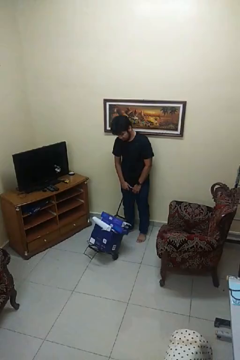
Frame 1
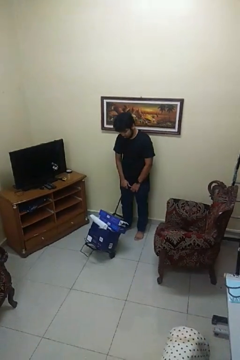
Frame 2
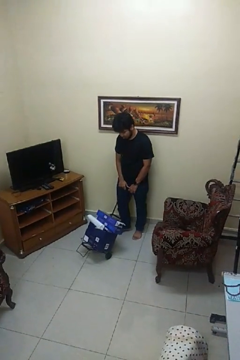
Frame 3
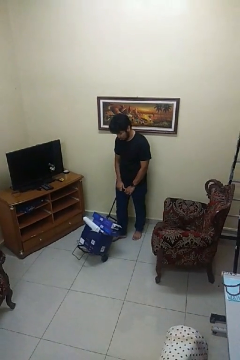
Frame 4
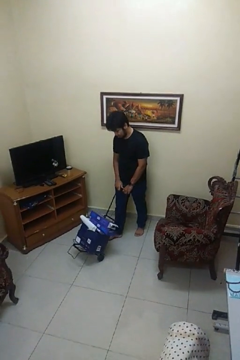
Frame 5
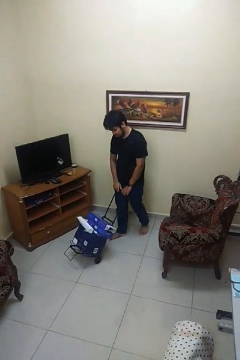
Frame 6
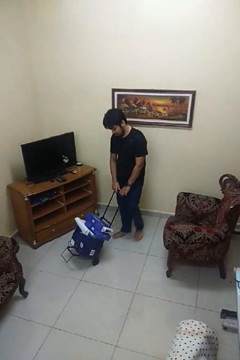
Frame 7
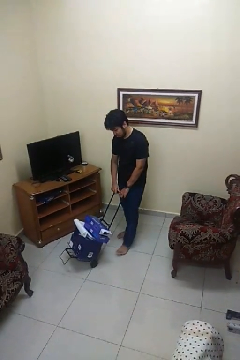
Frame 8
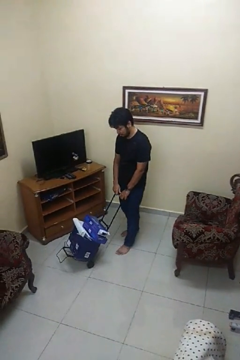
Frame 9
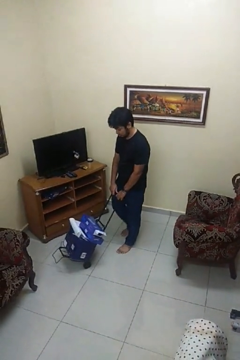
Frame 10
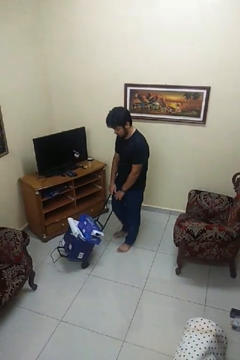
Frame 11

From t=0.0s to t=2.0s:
person pushes wheeled cart

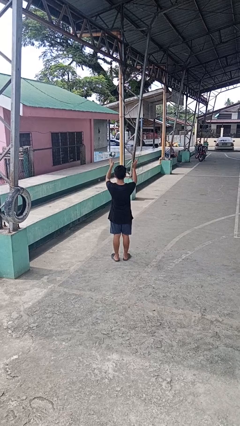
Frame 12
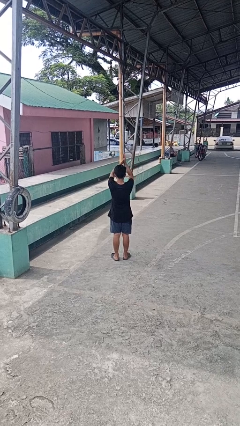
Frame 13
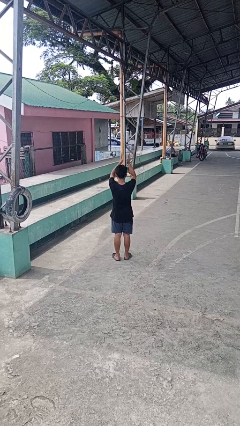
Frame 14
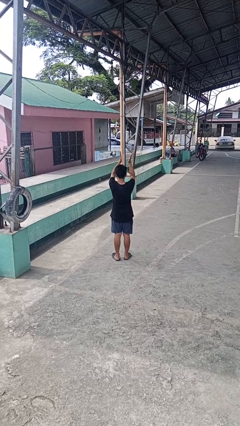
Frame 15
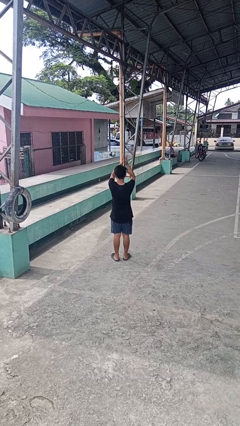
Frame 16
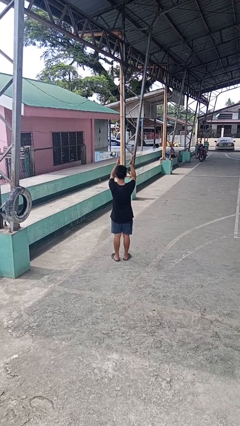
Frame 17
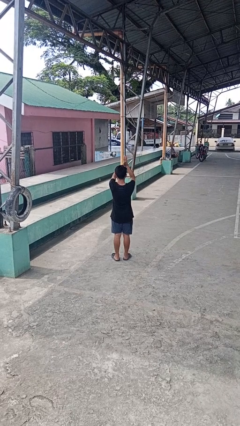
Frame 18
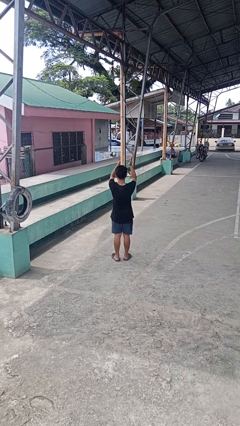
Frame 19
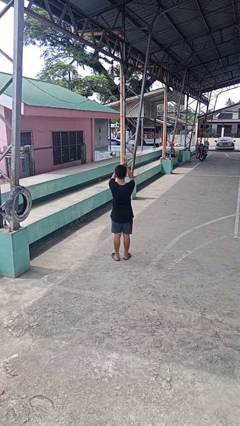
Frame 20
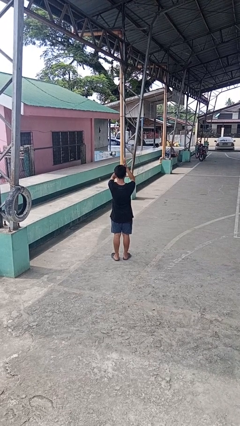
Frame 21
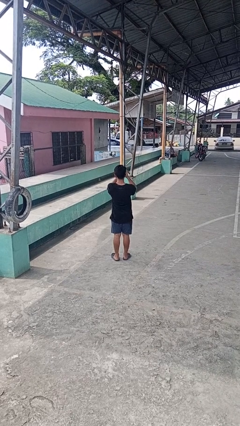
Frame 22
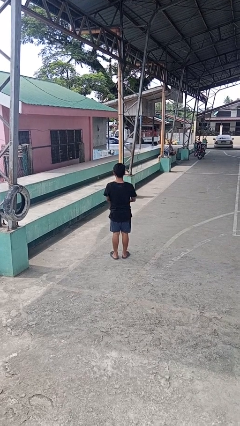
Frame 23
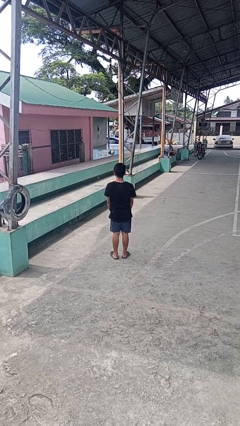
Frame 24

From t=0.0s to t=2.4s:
person claps hands

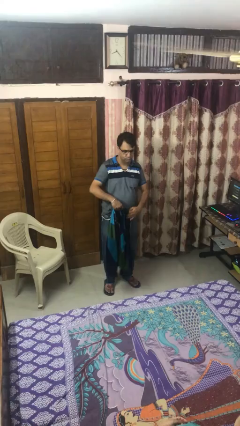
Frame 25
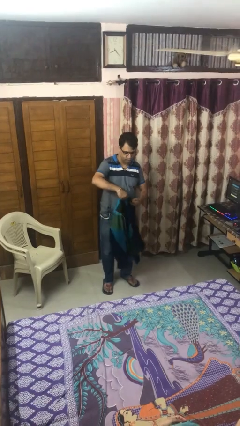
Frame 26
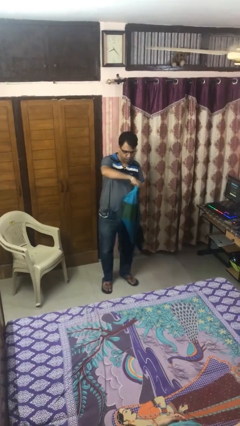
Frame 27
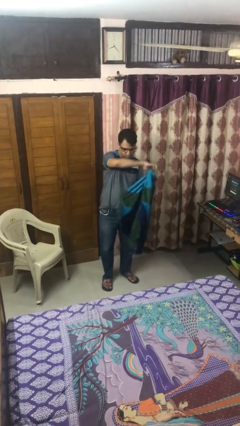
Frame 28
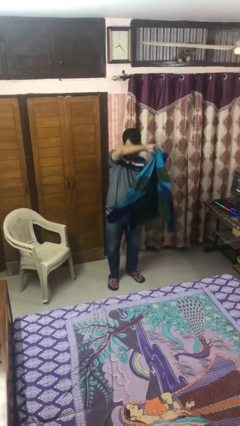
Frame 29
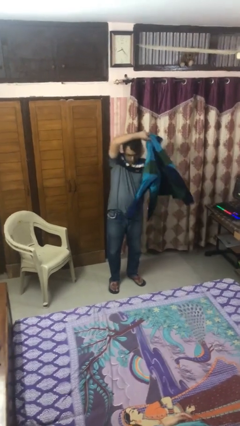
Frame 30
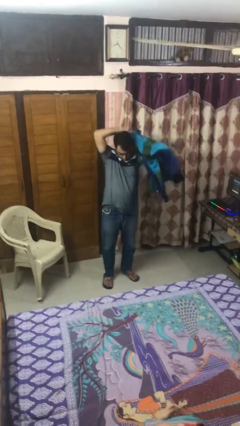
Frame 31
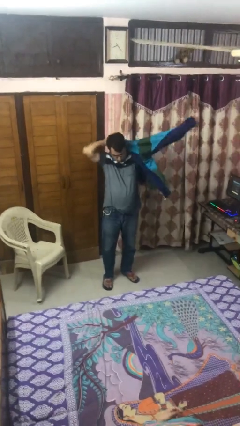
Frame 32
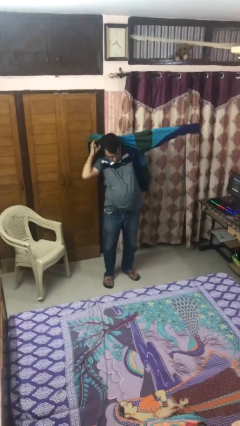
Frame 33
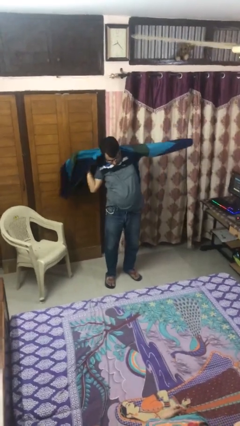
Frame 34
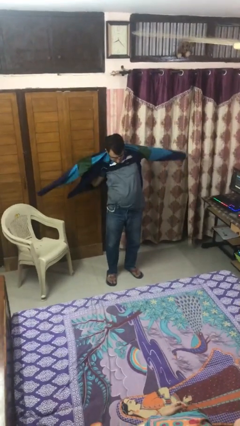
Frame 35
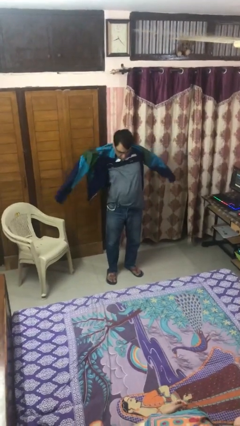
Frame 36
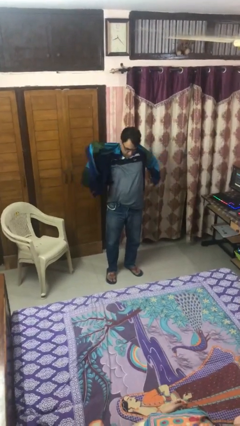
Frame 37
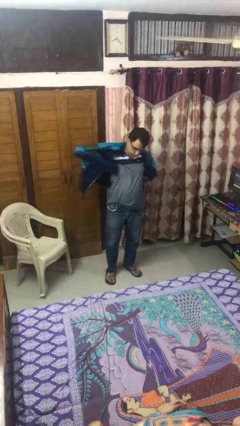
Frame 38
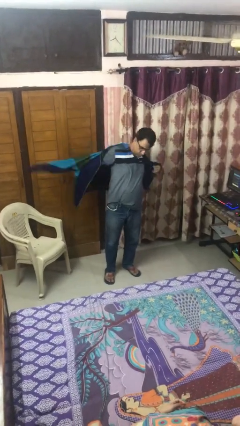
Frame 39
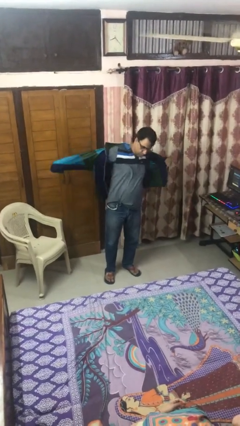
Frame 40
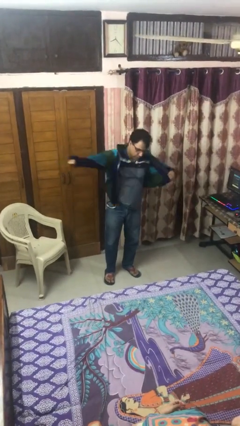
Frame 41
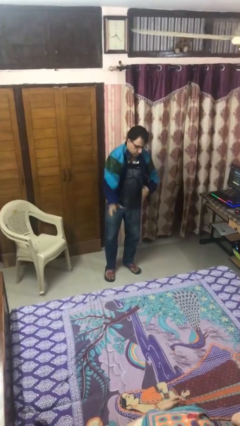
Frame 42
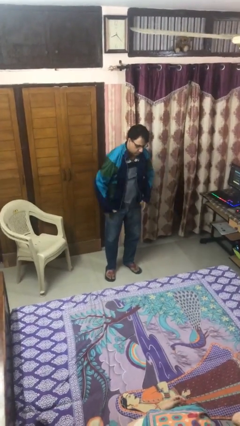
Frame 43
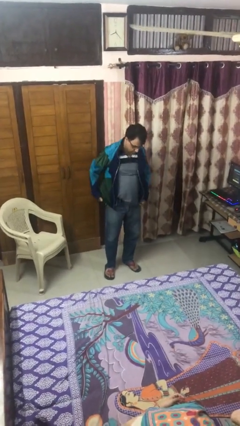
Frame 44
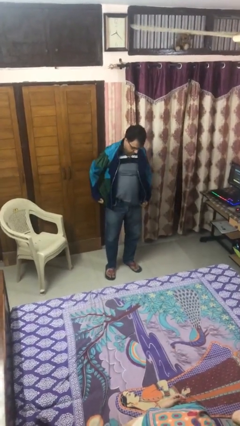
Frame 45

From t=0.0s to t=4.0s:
person puts on jacket

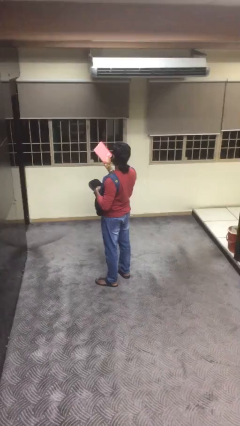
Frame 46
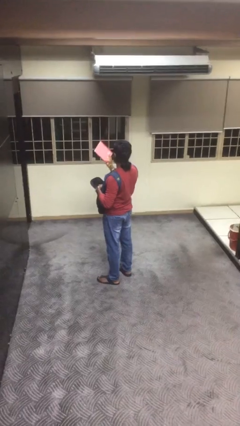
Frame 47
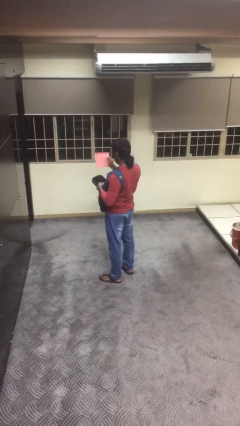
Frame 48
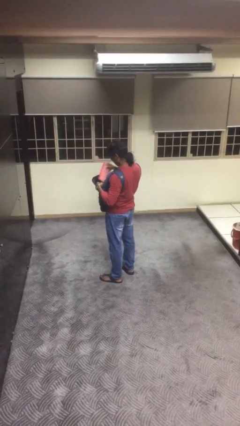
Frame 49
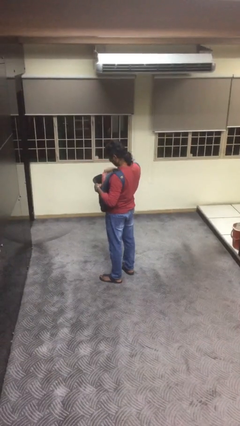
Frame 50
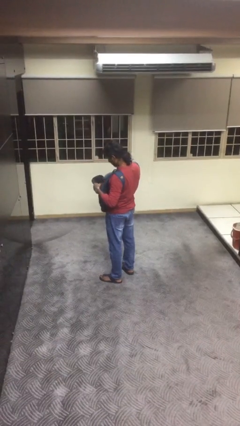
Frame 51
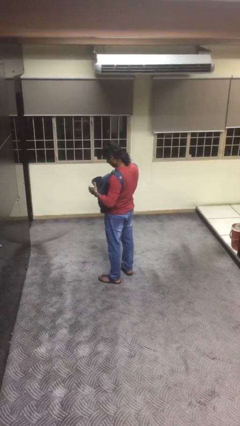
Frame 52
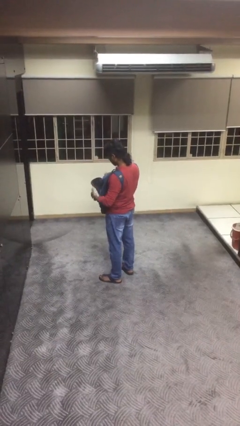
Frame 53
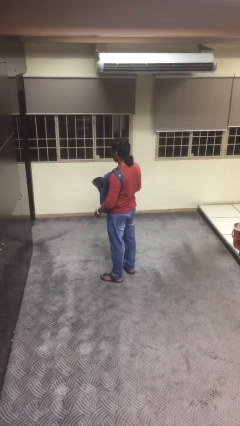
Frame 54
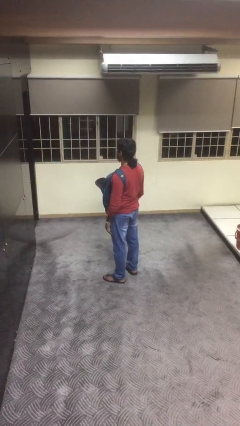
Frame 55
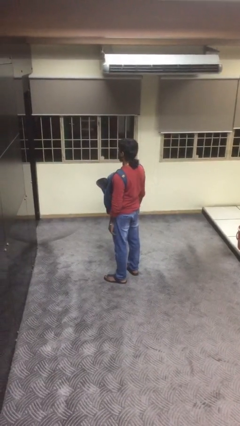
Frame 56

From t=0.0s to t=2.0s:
person puts object into backpack

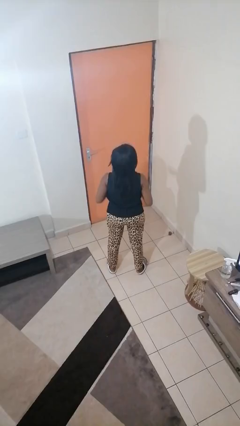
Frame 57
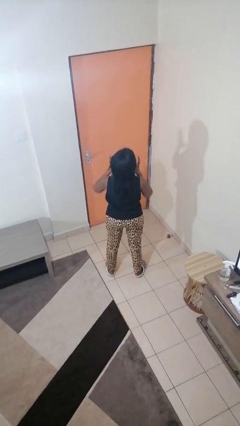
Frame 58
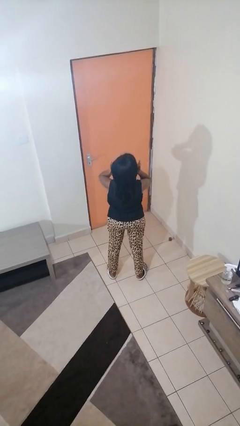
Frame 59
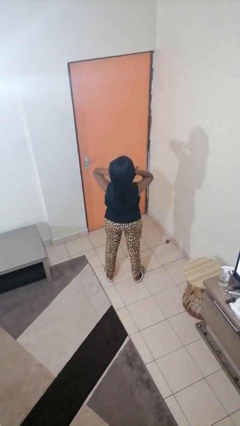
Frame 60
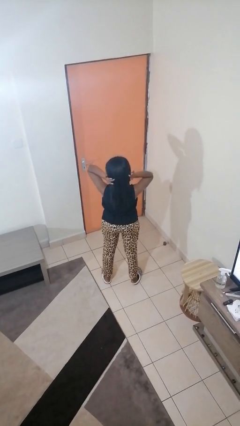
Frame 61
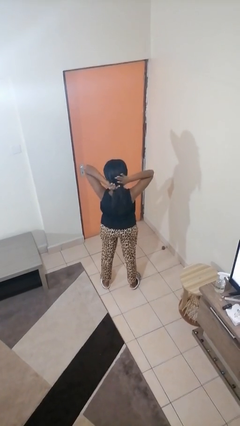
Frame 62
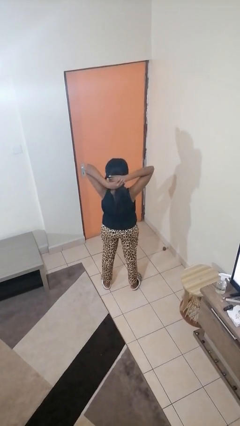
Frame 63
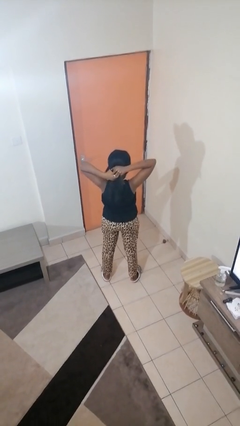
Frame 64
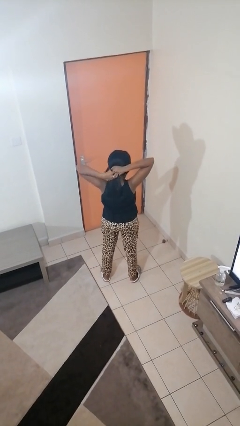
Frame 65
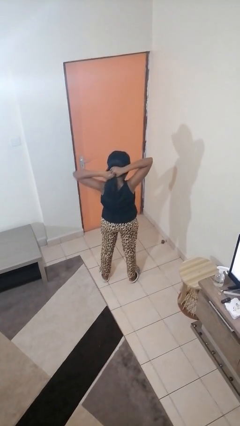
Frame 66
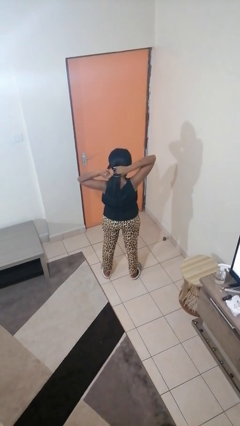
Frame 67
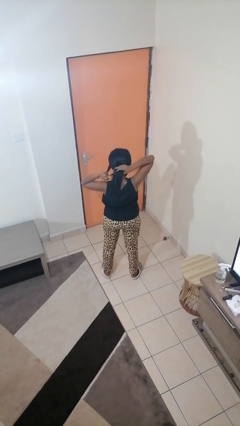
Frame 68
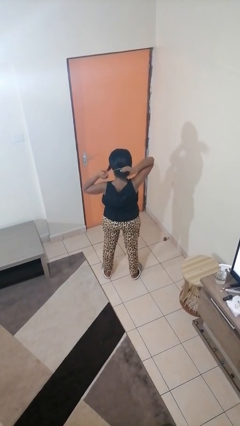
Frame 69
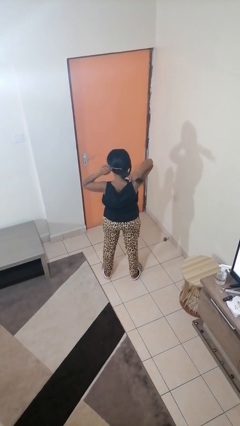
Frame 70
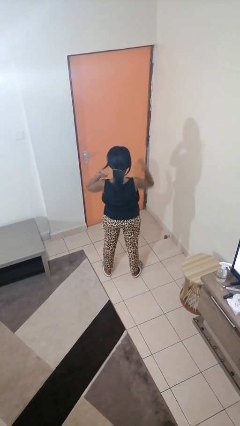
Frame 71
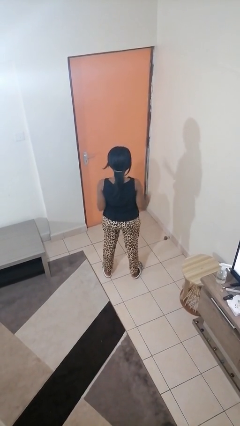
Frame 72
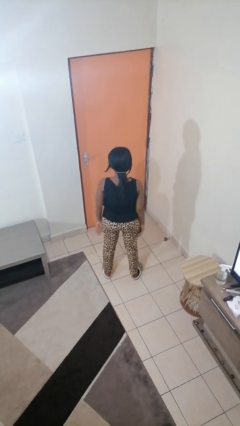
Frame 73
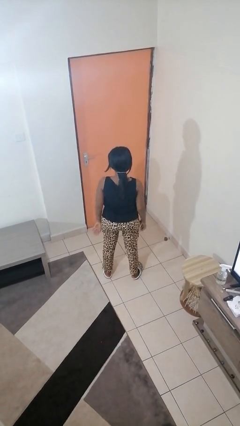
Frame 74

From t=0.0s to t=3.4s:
person puts hair in ponytail

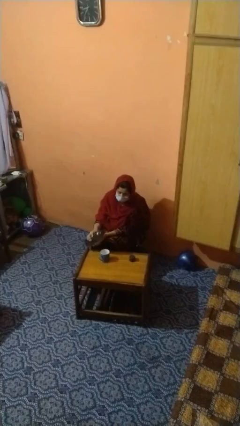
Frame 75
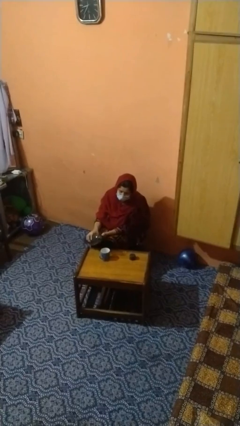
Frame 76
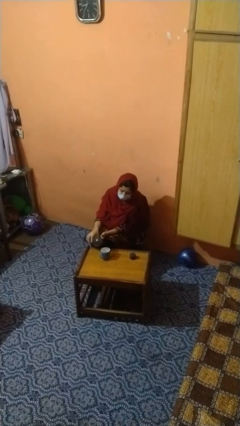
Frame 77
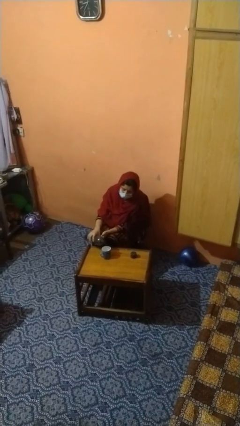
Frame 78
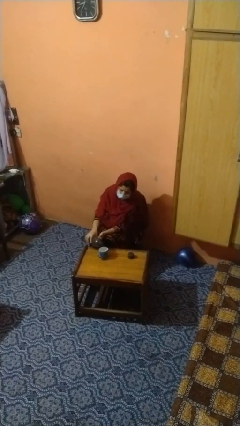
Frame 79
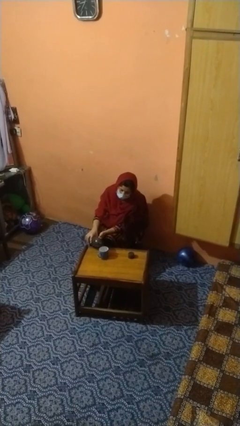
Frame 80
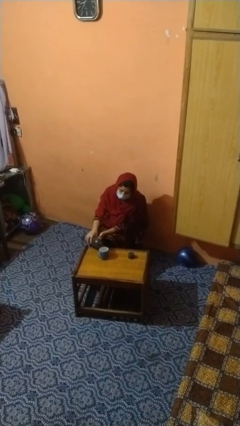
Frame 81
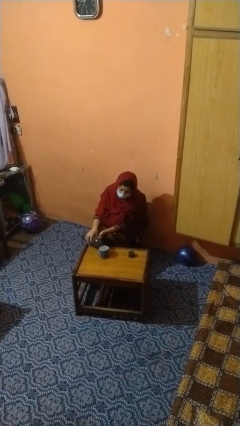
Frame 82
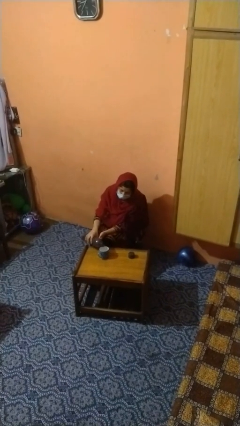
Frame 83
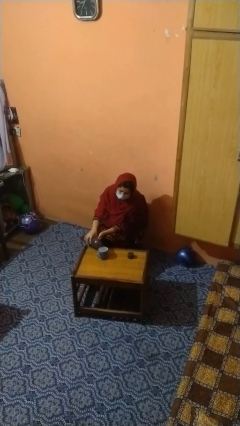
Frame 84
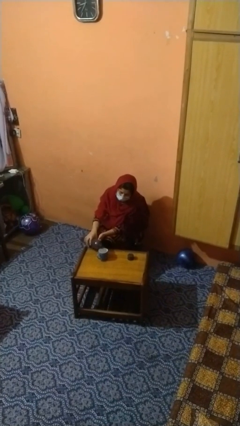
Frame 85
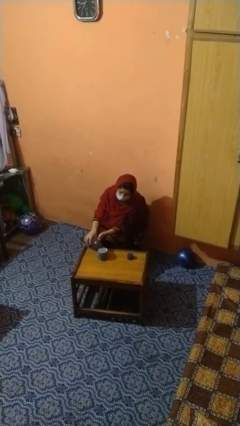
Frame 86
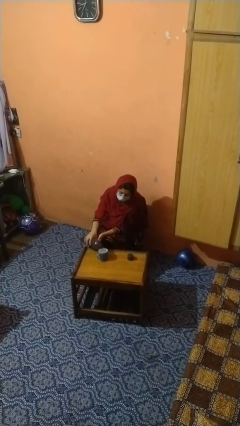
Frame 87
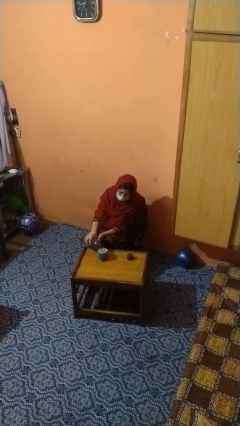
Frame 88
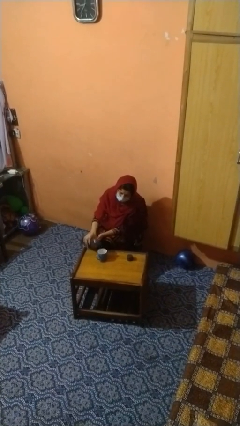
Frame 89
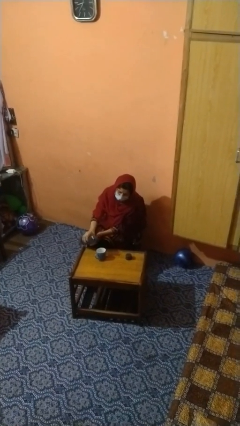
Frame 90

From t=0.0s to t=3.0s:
person pours liquid into cup

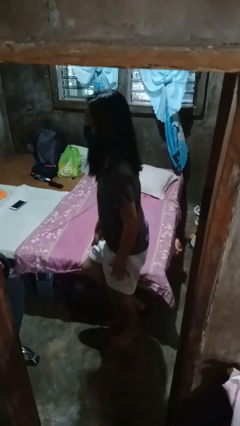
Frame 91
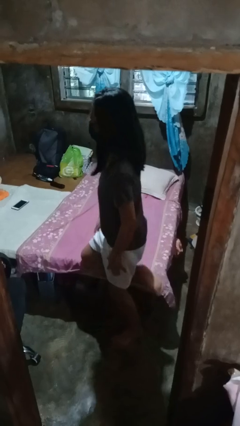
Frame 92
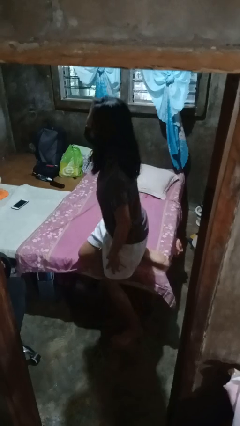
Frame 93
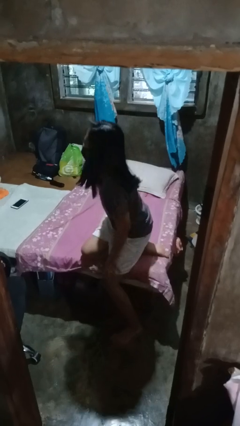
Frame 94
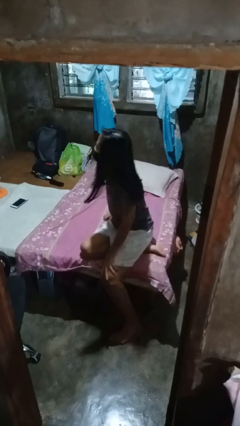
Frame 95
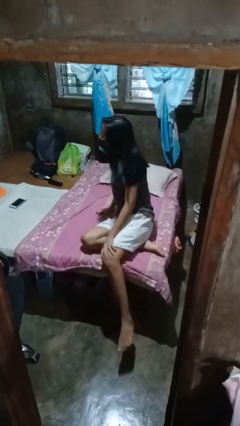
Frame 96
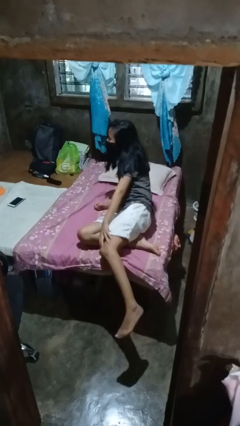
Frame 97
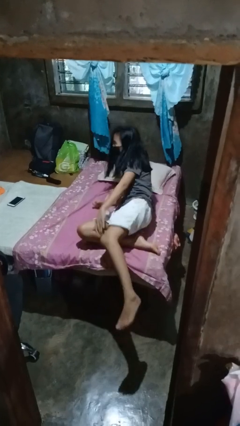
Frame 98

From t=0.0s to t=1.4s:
person lies down on bed
